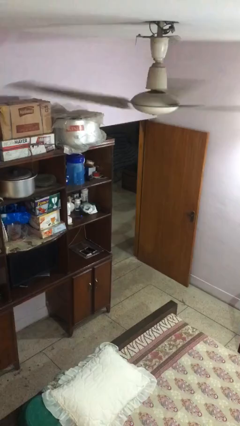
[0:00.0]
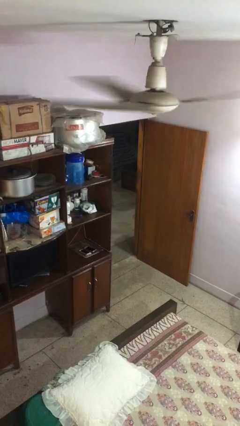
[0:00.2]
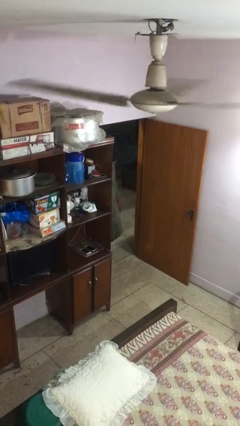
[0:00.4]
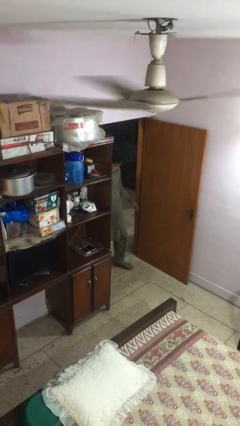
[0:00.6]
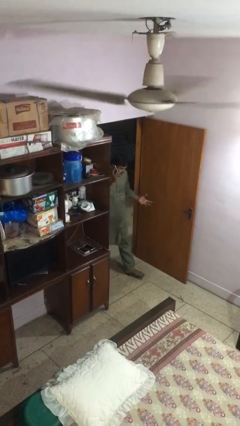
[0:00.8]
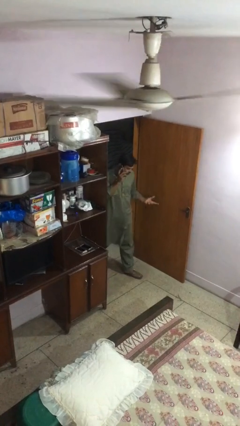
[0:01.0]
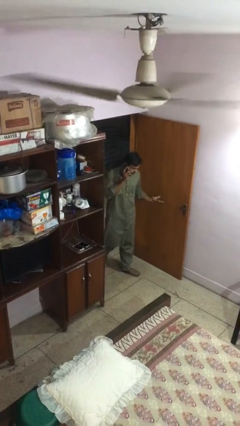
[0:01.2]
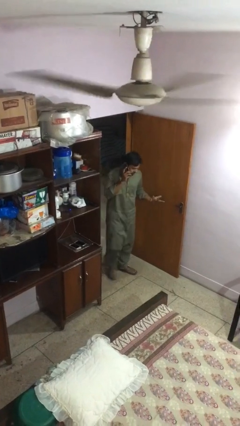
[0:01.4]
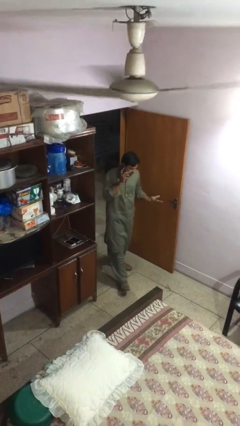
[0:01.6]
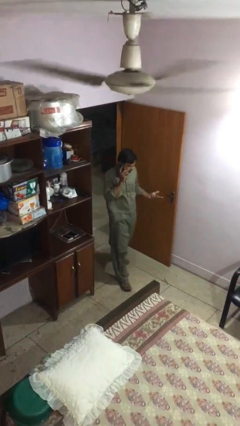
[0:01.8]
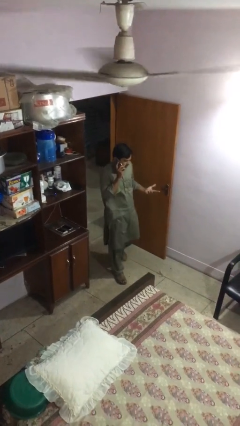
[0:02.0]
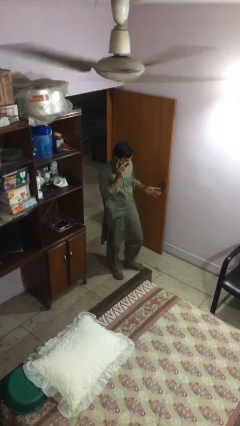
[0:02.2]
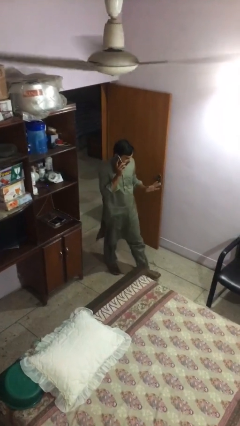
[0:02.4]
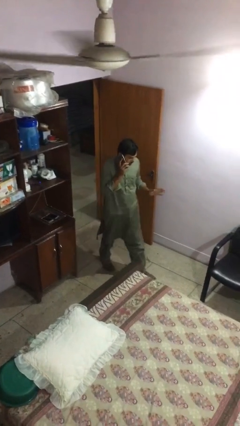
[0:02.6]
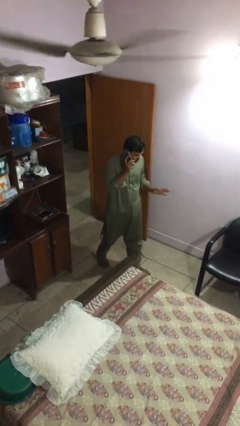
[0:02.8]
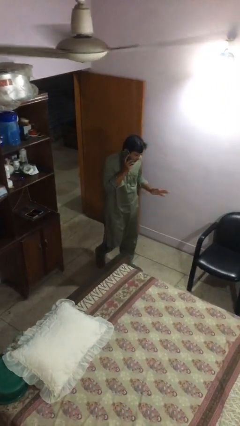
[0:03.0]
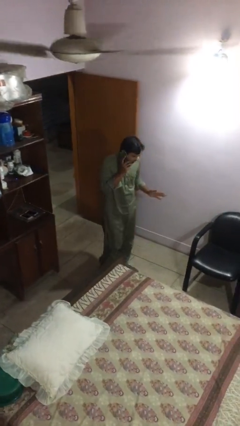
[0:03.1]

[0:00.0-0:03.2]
person enters scene through structure

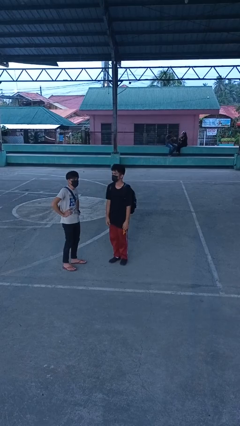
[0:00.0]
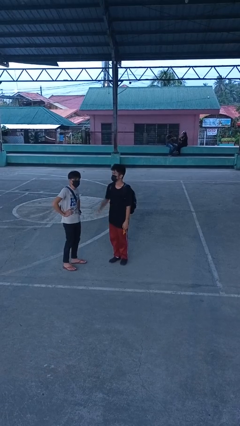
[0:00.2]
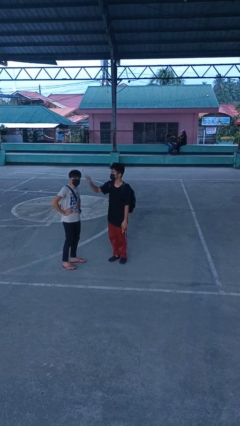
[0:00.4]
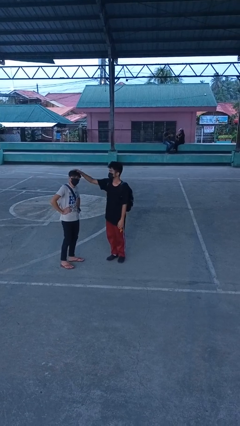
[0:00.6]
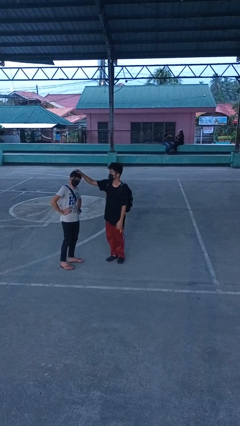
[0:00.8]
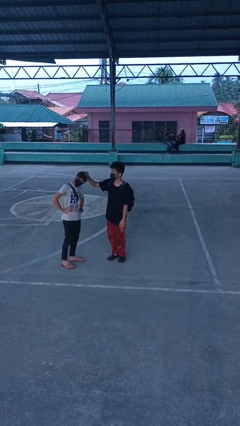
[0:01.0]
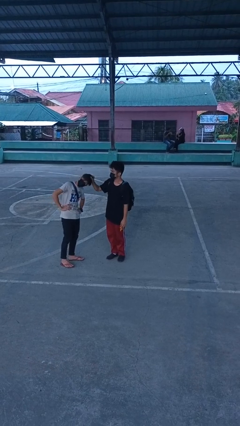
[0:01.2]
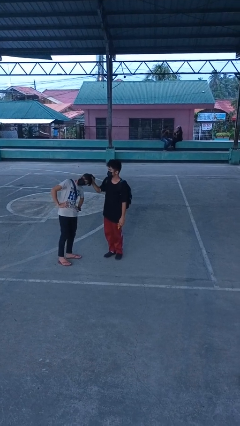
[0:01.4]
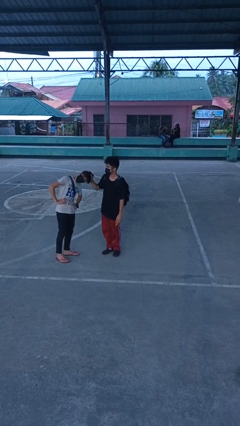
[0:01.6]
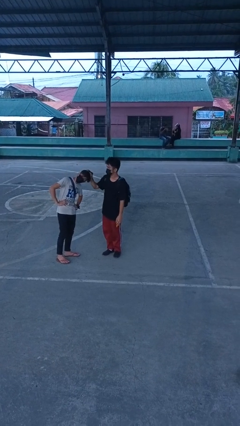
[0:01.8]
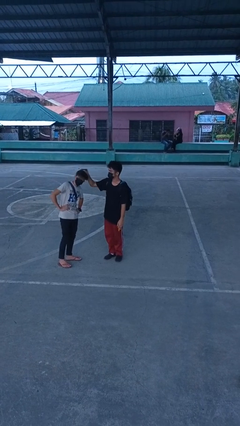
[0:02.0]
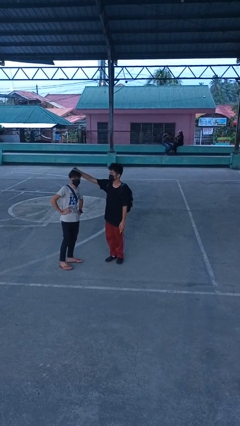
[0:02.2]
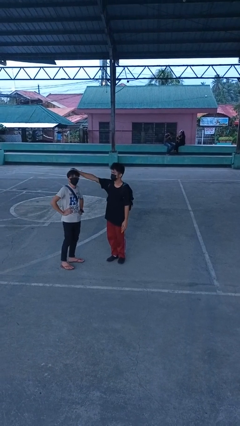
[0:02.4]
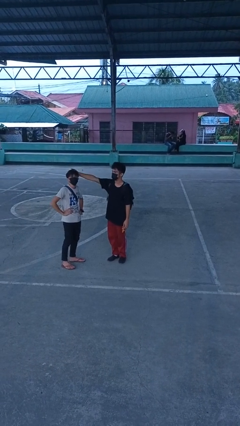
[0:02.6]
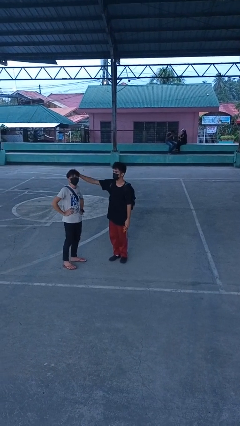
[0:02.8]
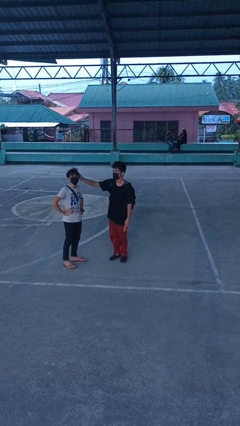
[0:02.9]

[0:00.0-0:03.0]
person grabs person by hair

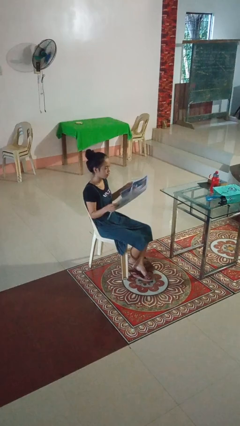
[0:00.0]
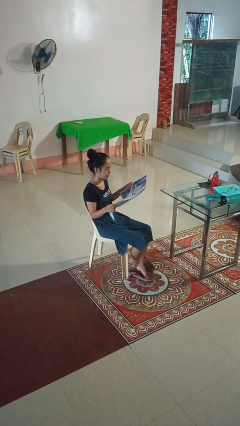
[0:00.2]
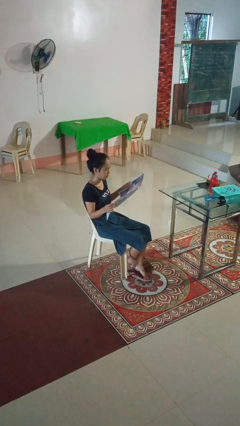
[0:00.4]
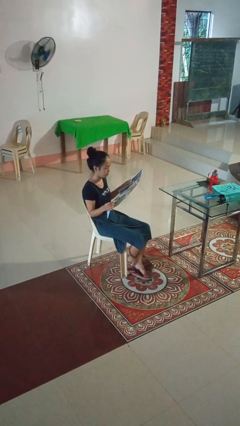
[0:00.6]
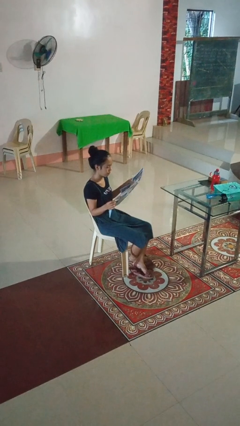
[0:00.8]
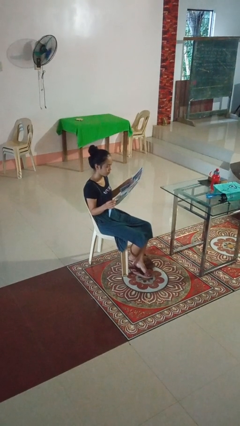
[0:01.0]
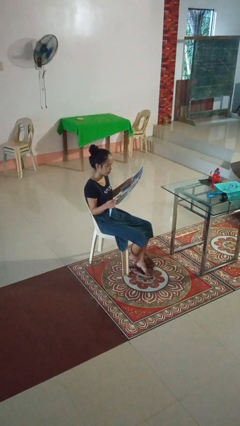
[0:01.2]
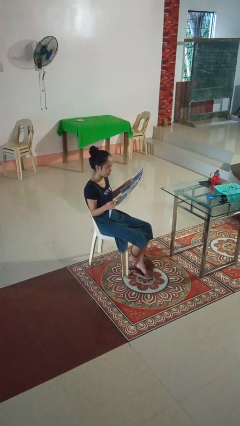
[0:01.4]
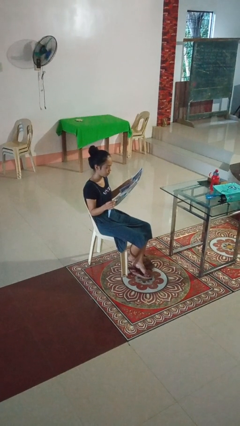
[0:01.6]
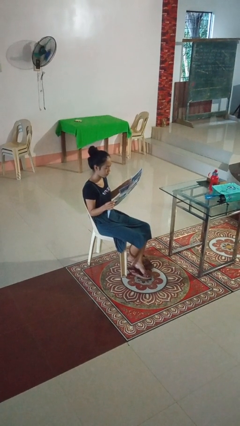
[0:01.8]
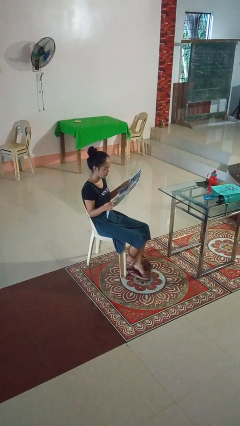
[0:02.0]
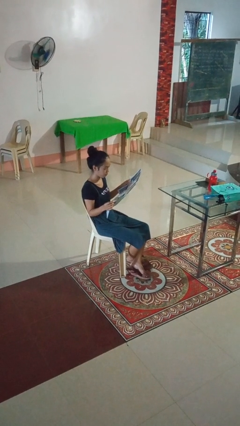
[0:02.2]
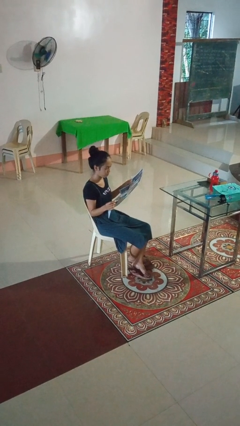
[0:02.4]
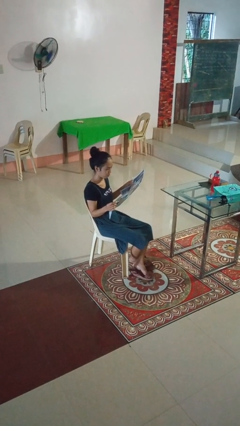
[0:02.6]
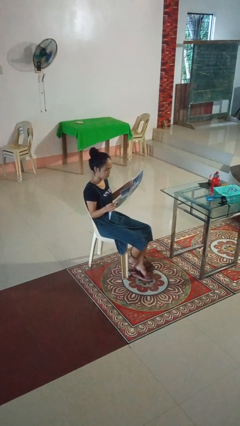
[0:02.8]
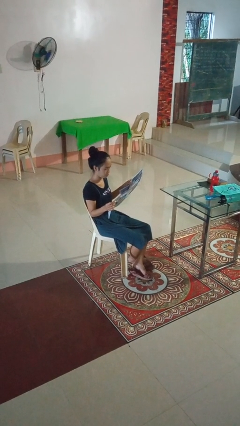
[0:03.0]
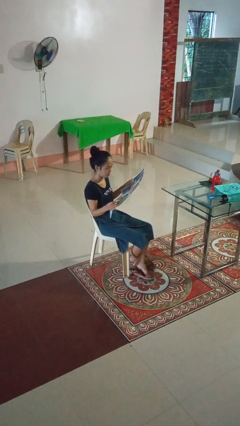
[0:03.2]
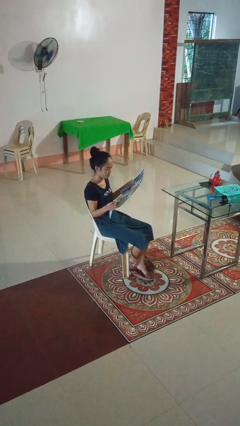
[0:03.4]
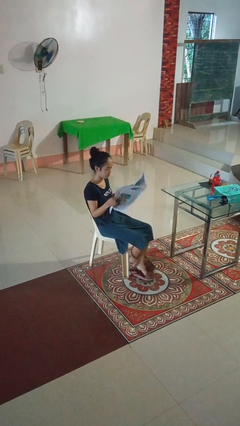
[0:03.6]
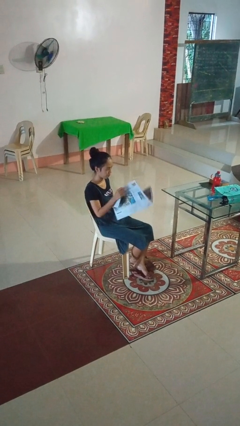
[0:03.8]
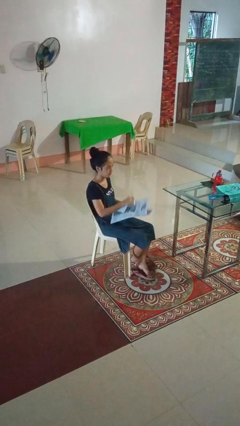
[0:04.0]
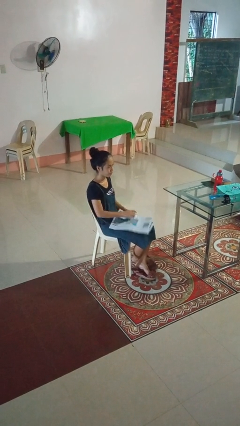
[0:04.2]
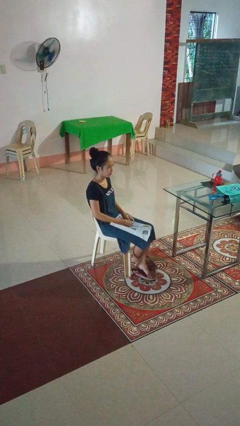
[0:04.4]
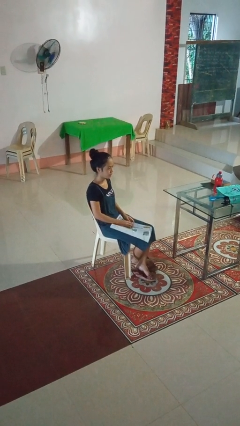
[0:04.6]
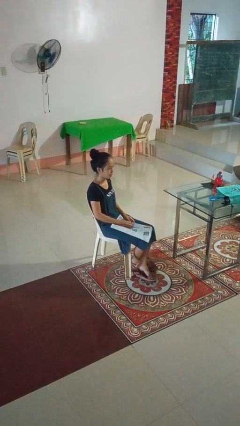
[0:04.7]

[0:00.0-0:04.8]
person reads newspaper

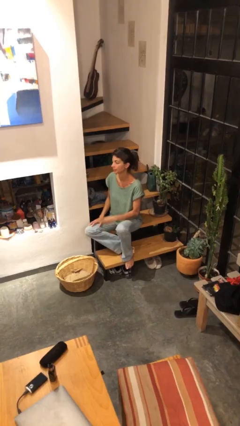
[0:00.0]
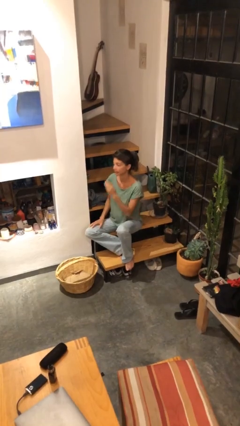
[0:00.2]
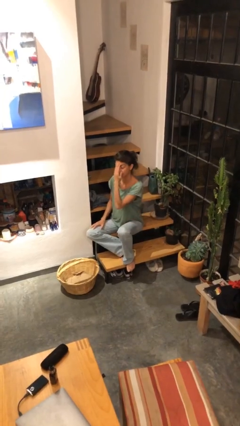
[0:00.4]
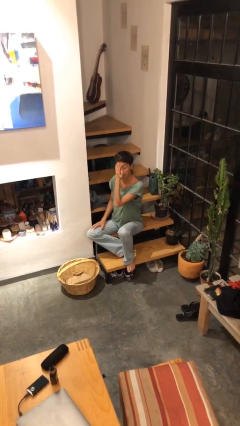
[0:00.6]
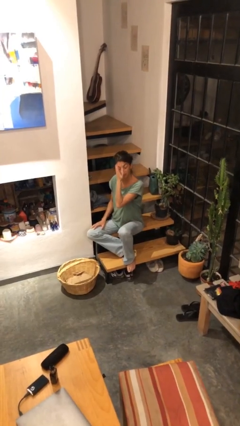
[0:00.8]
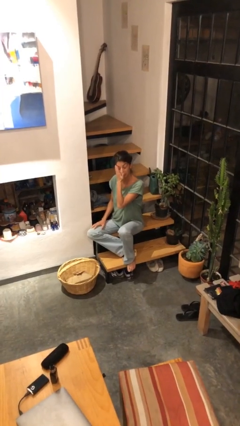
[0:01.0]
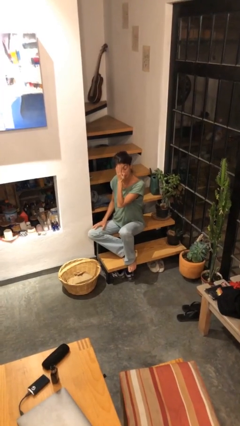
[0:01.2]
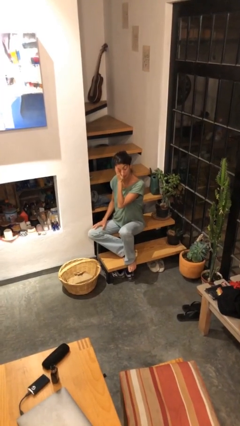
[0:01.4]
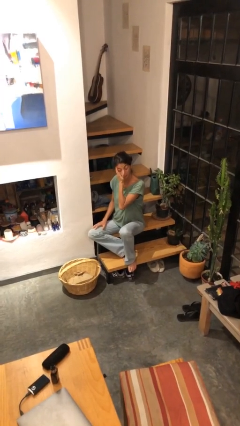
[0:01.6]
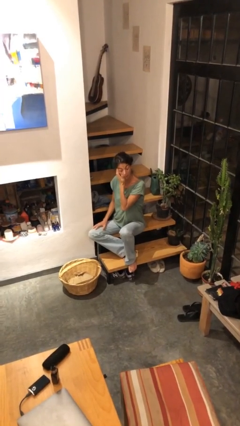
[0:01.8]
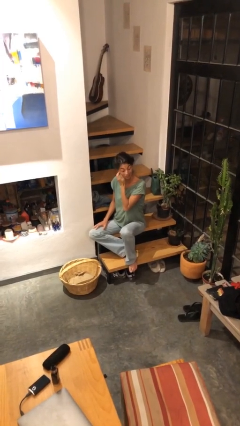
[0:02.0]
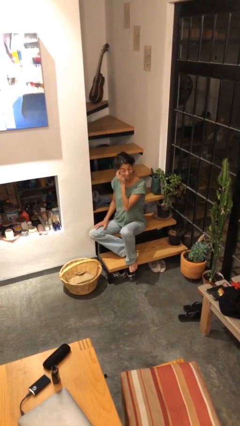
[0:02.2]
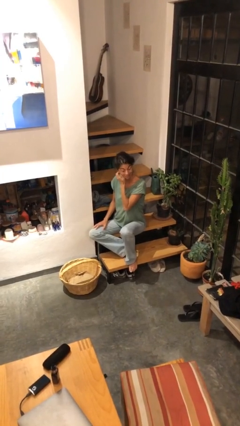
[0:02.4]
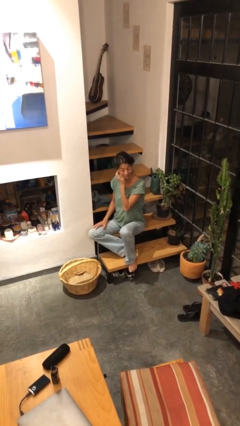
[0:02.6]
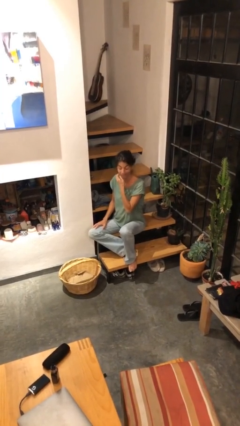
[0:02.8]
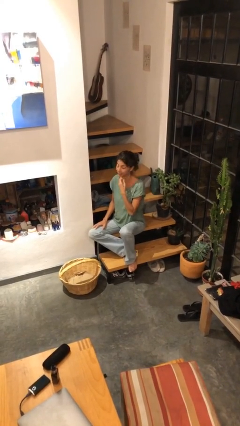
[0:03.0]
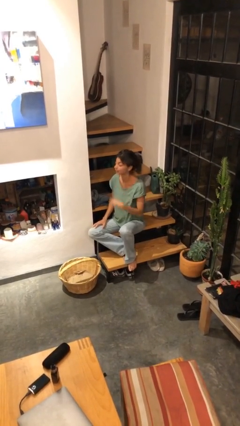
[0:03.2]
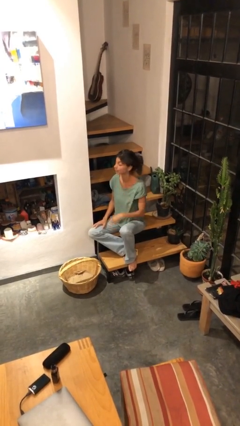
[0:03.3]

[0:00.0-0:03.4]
person scratches face

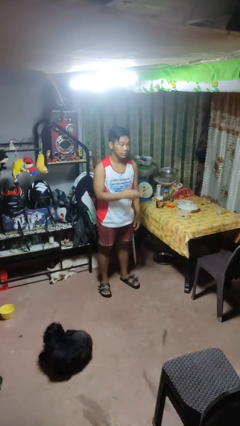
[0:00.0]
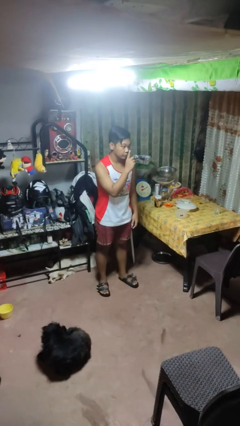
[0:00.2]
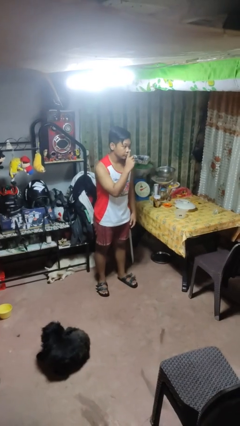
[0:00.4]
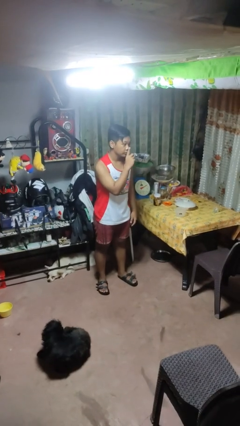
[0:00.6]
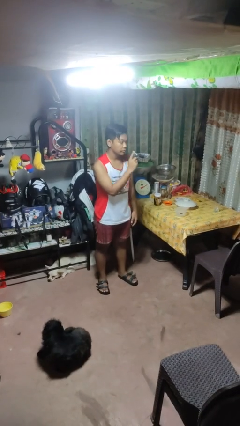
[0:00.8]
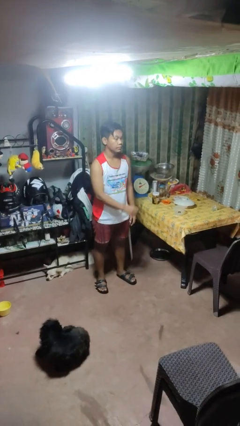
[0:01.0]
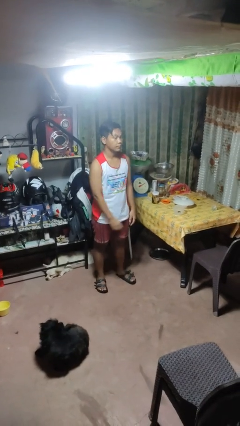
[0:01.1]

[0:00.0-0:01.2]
person gestures be quiet

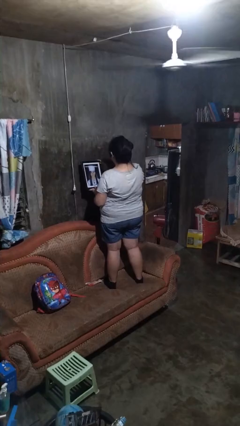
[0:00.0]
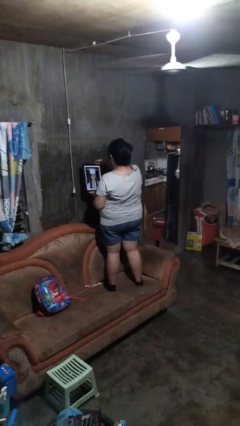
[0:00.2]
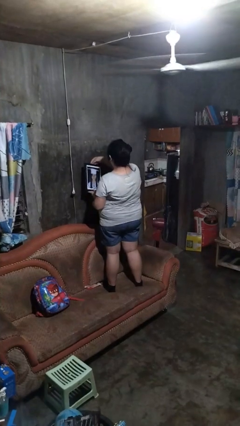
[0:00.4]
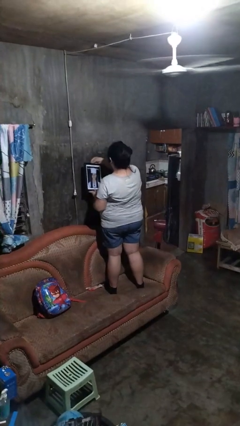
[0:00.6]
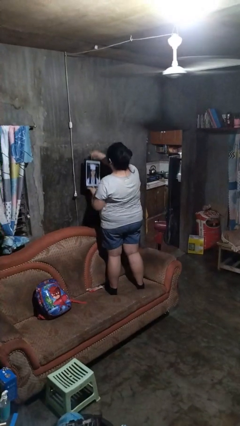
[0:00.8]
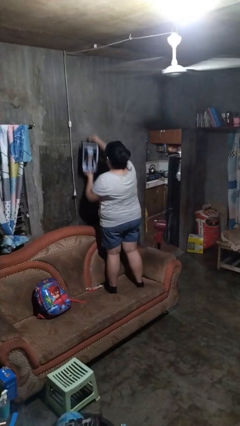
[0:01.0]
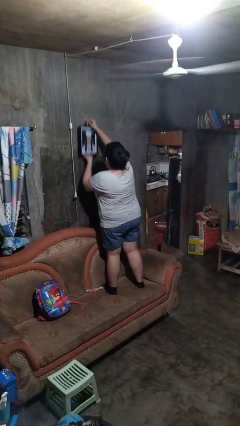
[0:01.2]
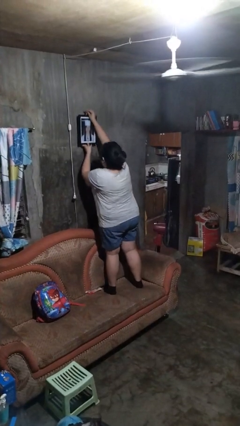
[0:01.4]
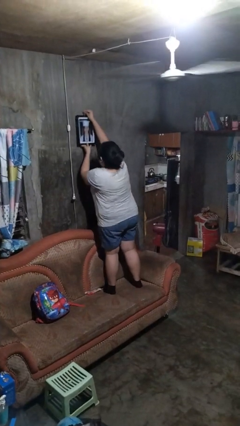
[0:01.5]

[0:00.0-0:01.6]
person puts up picture frame

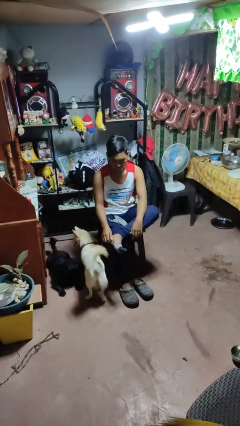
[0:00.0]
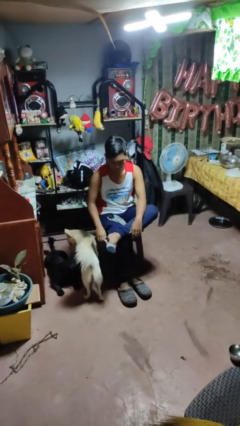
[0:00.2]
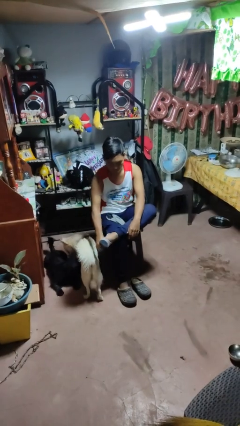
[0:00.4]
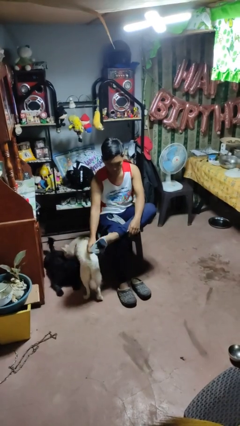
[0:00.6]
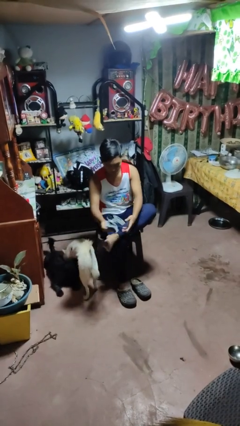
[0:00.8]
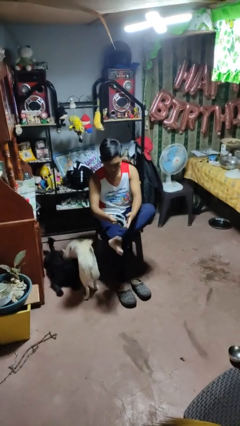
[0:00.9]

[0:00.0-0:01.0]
person takes off socks
